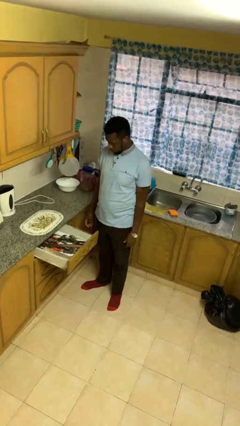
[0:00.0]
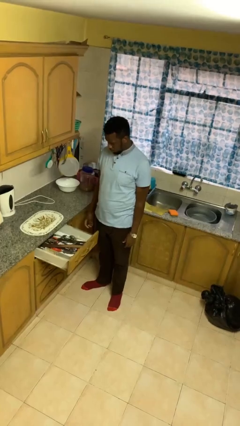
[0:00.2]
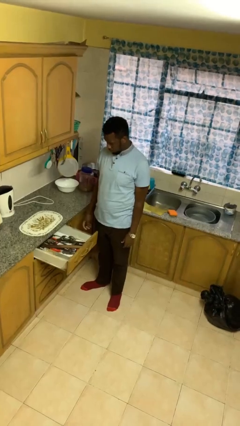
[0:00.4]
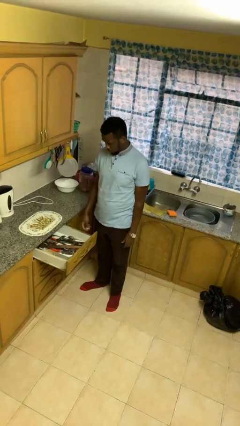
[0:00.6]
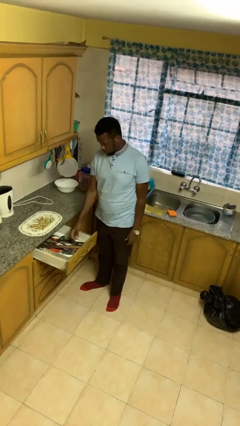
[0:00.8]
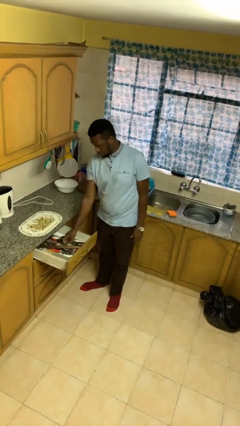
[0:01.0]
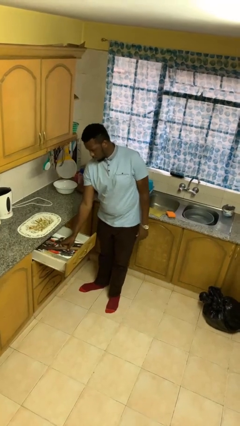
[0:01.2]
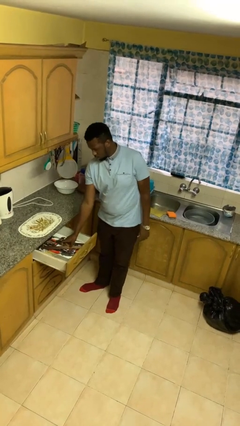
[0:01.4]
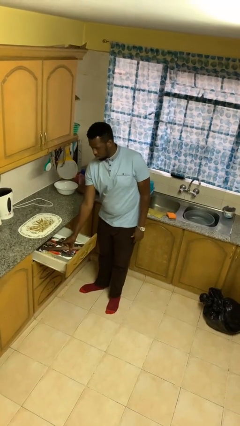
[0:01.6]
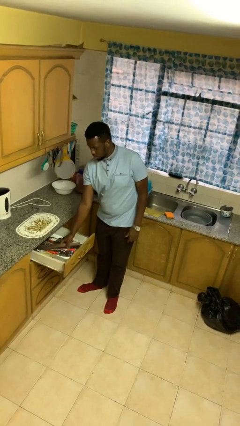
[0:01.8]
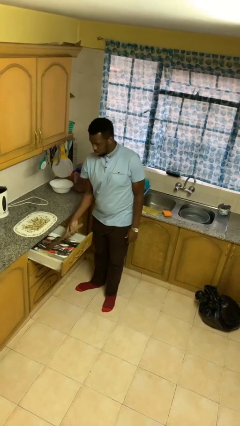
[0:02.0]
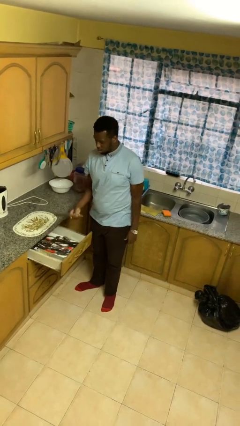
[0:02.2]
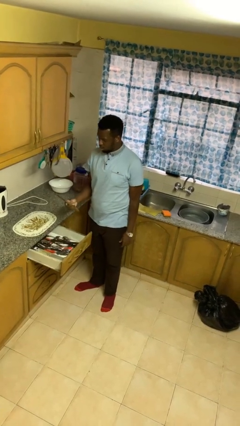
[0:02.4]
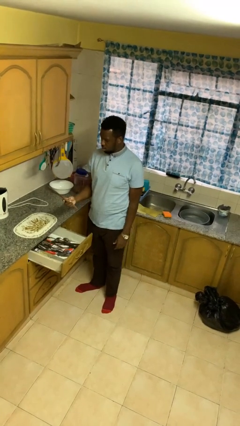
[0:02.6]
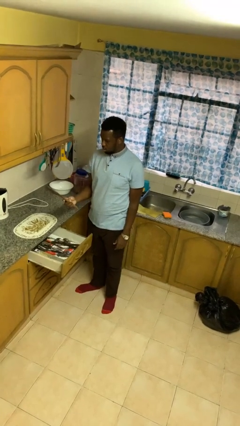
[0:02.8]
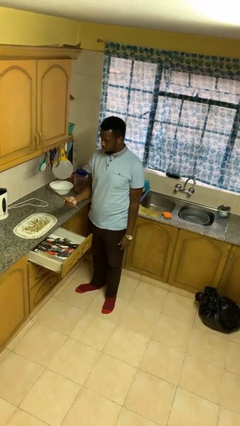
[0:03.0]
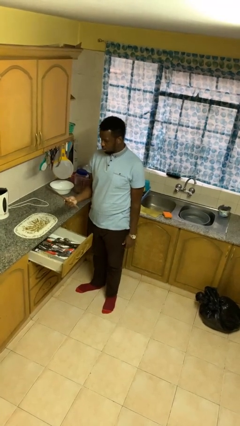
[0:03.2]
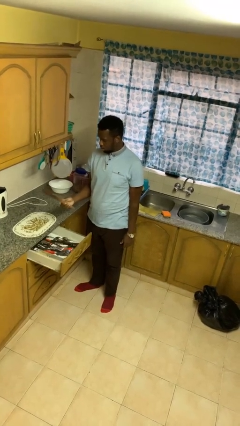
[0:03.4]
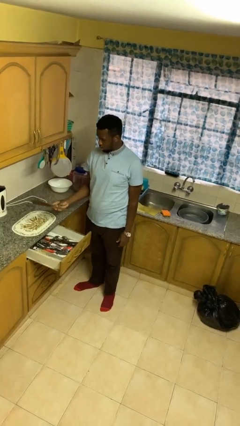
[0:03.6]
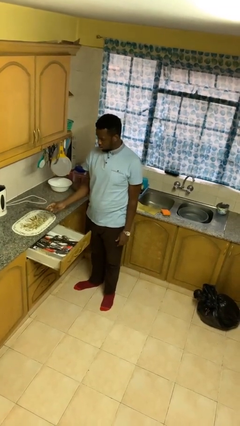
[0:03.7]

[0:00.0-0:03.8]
person takes object from kitchen drawer

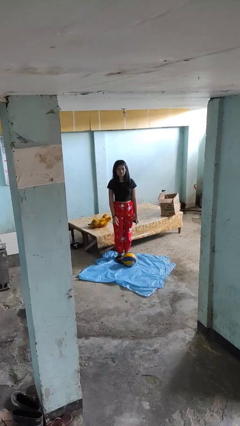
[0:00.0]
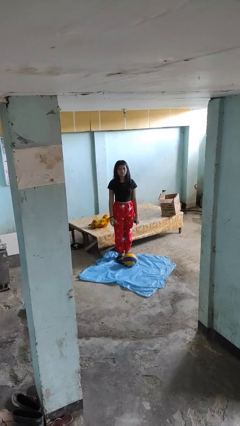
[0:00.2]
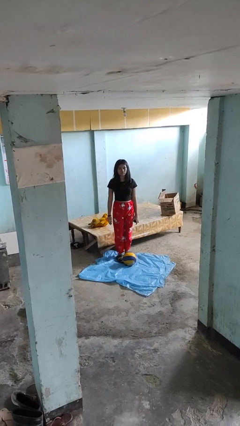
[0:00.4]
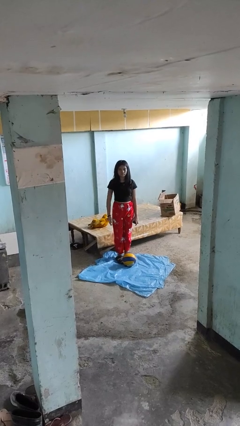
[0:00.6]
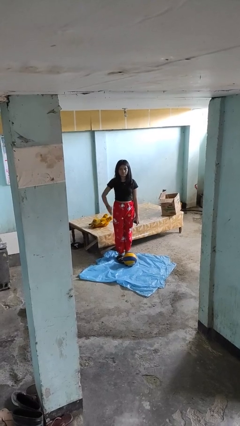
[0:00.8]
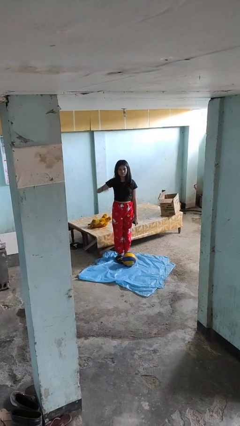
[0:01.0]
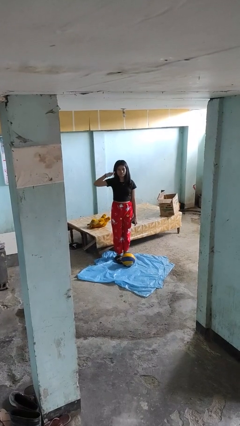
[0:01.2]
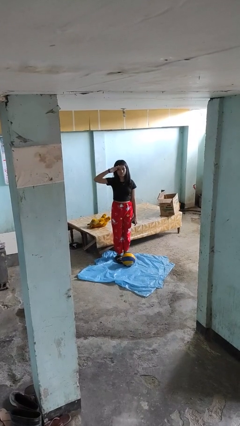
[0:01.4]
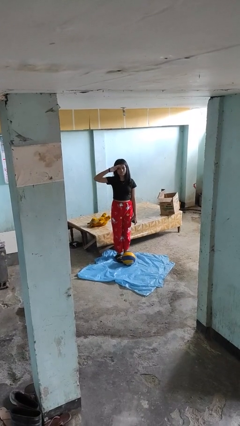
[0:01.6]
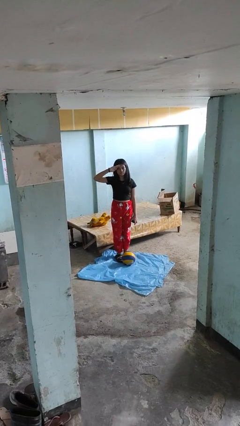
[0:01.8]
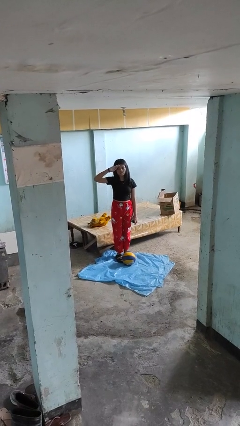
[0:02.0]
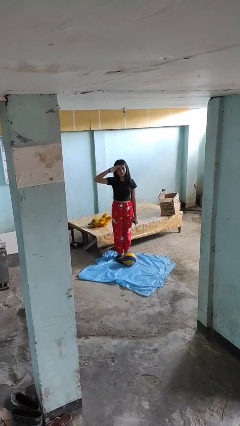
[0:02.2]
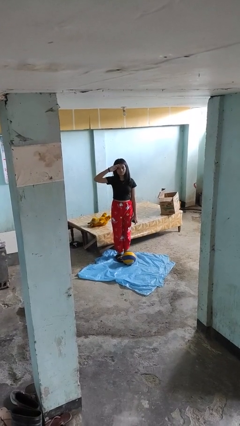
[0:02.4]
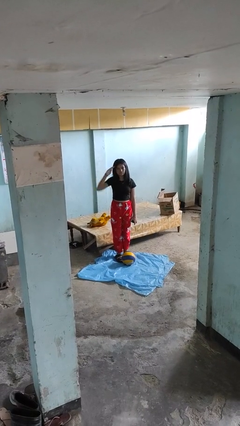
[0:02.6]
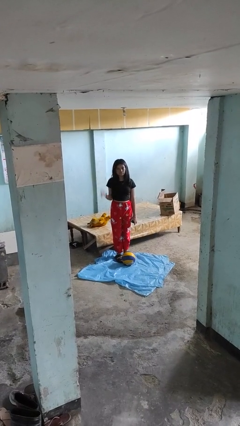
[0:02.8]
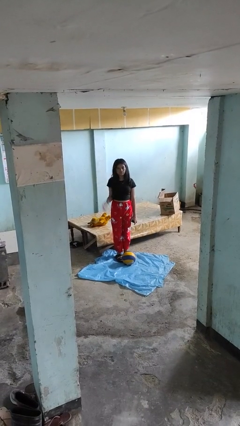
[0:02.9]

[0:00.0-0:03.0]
person salutes

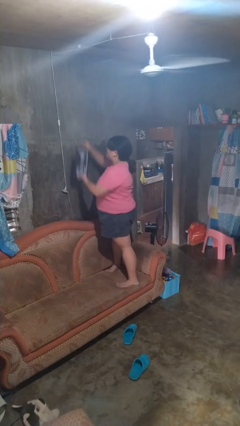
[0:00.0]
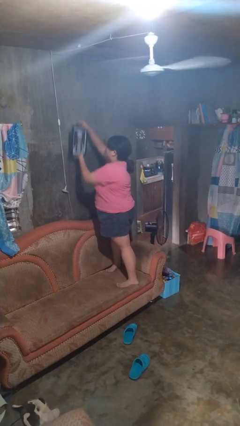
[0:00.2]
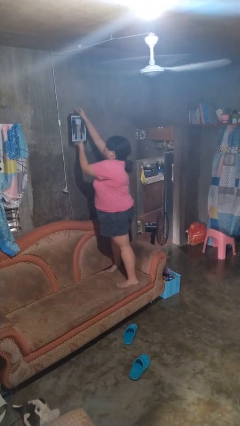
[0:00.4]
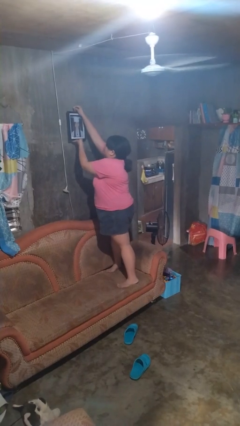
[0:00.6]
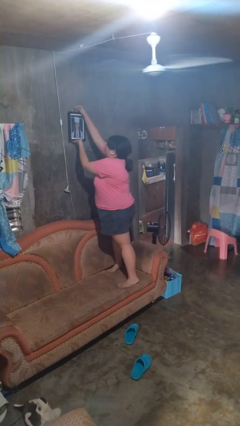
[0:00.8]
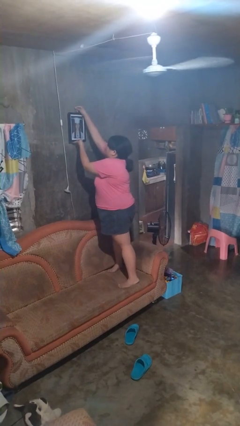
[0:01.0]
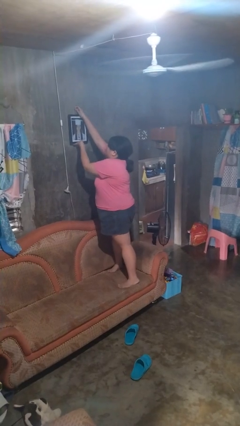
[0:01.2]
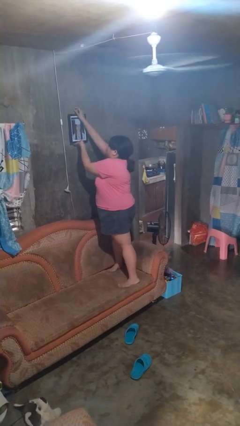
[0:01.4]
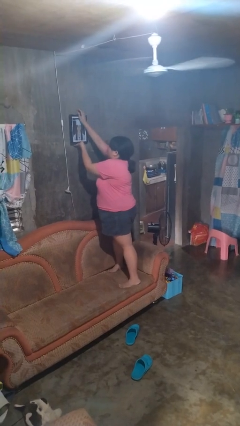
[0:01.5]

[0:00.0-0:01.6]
person puts up picture frame

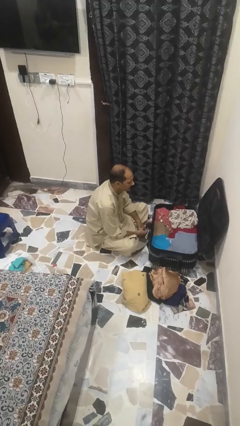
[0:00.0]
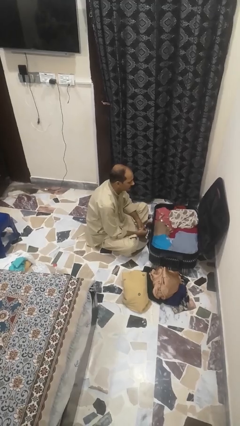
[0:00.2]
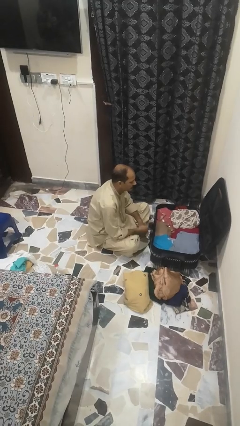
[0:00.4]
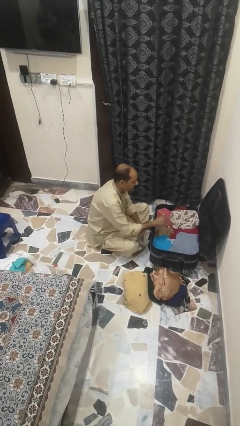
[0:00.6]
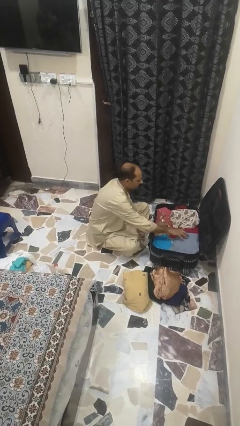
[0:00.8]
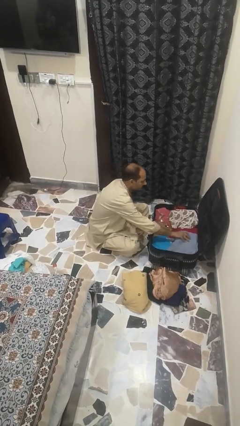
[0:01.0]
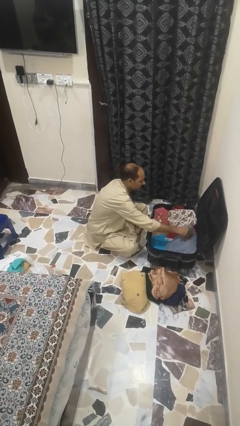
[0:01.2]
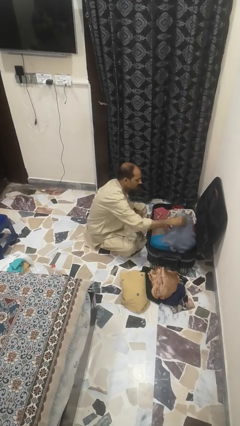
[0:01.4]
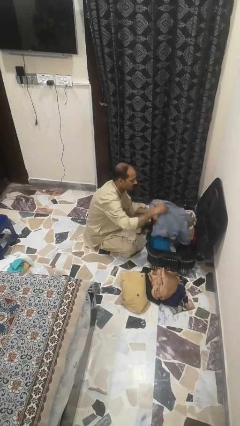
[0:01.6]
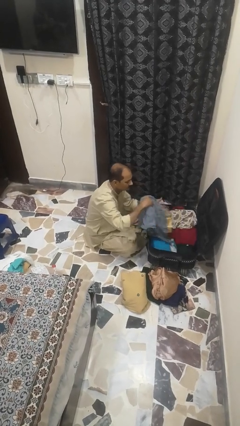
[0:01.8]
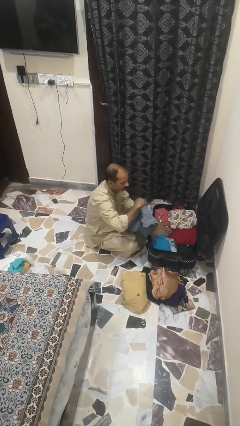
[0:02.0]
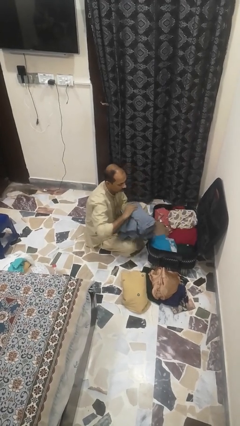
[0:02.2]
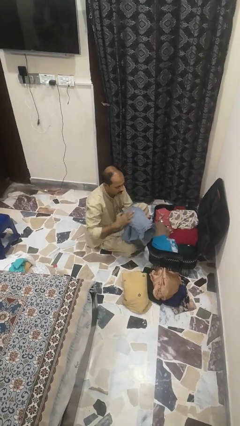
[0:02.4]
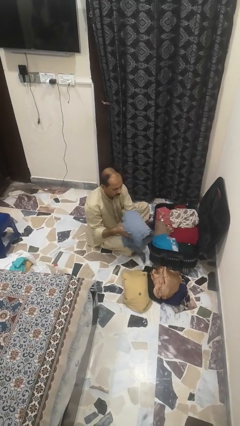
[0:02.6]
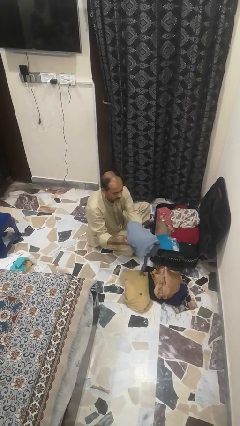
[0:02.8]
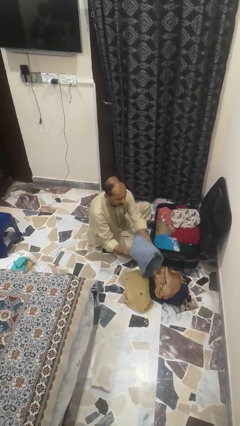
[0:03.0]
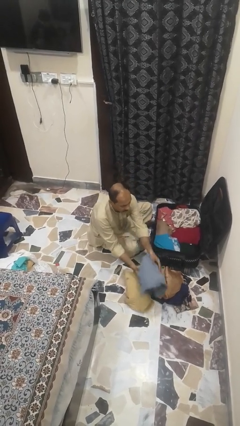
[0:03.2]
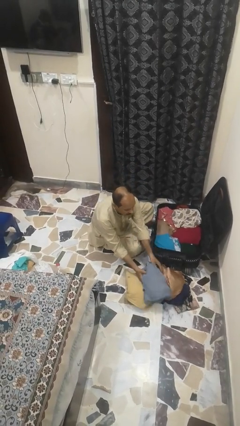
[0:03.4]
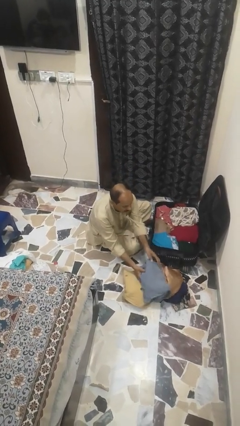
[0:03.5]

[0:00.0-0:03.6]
person unloads clothes from suitcase

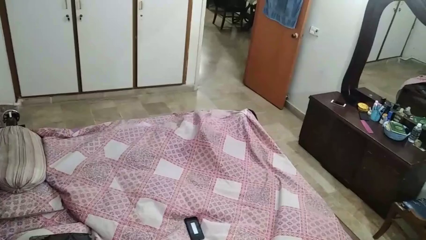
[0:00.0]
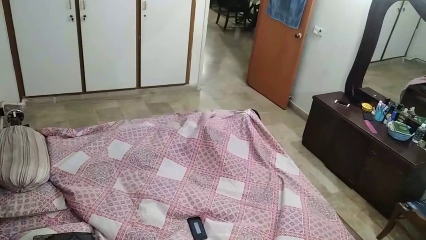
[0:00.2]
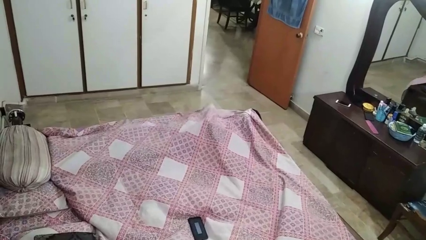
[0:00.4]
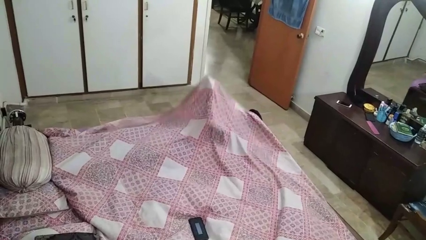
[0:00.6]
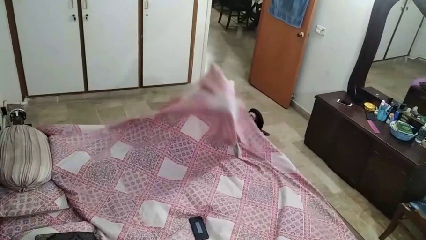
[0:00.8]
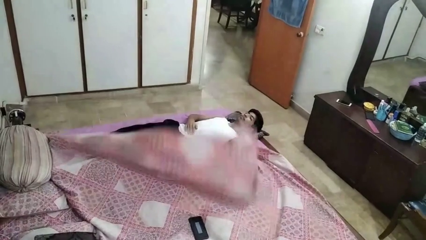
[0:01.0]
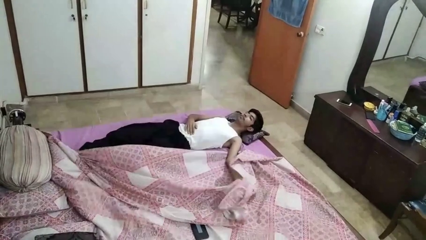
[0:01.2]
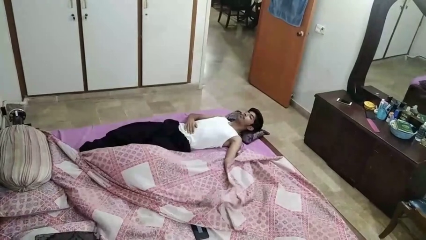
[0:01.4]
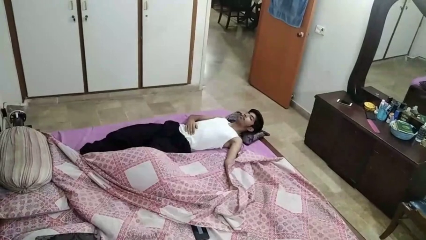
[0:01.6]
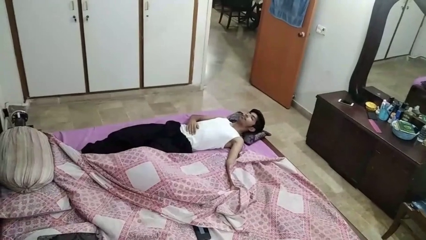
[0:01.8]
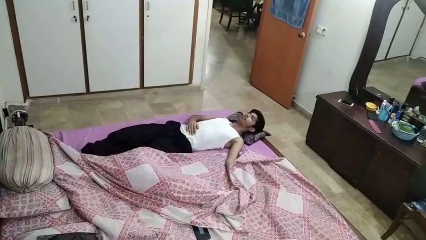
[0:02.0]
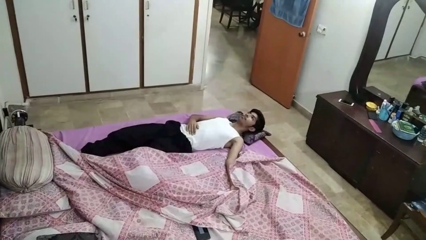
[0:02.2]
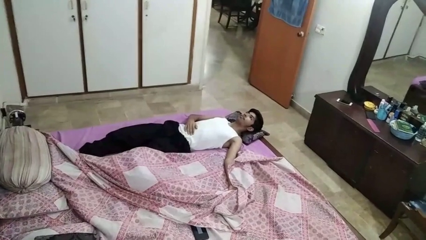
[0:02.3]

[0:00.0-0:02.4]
person uncovers with bedsheets

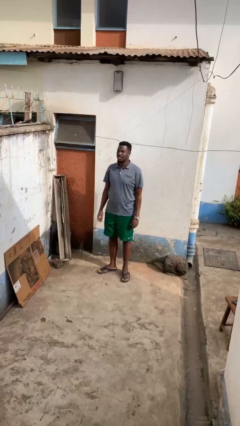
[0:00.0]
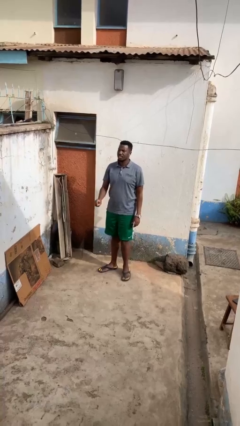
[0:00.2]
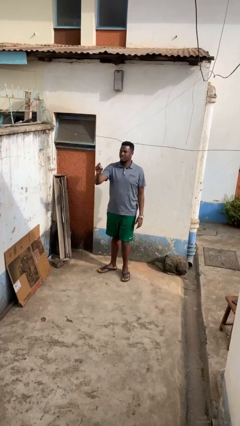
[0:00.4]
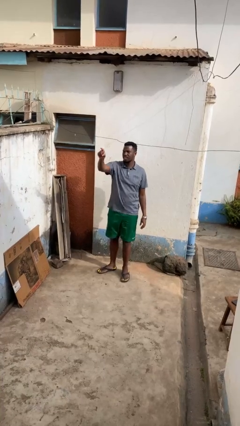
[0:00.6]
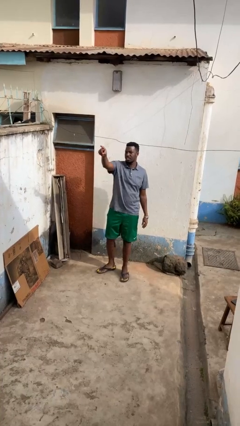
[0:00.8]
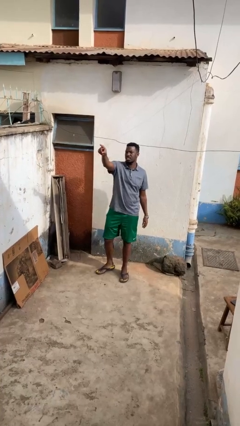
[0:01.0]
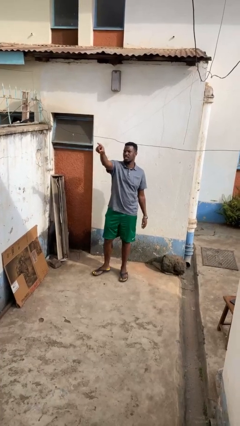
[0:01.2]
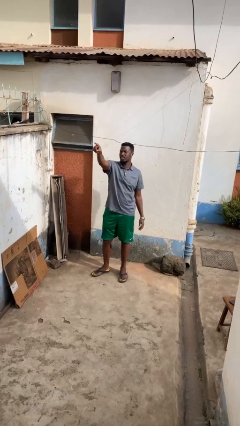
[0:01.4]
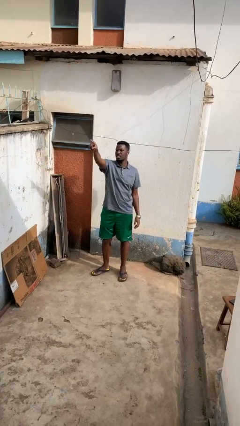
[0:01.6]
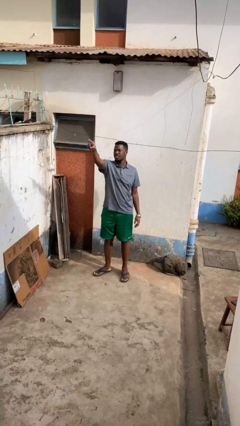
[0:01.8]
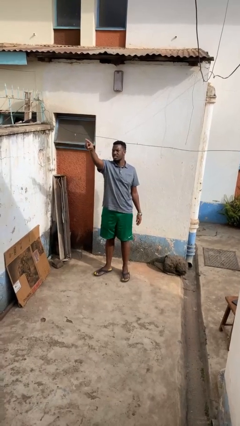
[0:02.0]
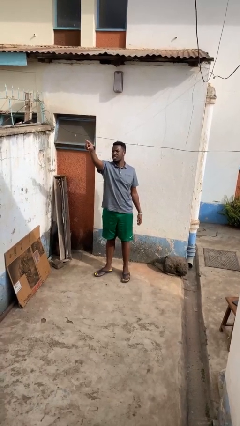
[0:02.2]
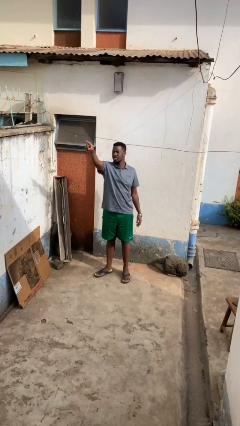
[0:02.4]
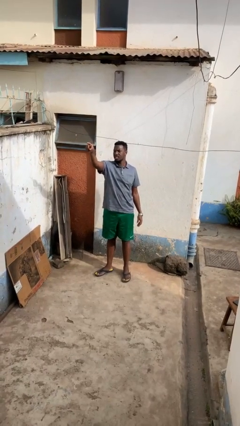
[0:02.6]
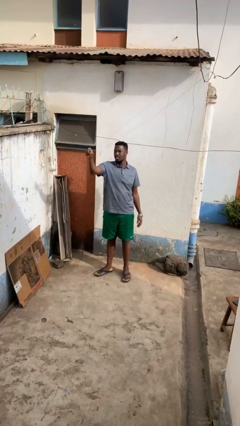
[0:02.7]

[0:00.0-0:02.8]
person points at person

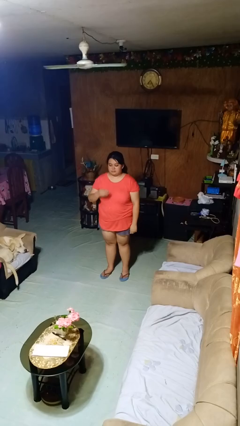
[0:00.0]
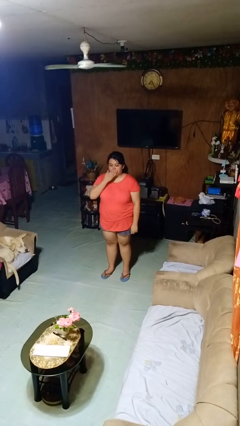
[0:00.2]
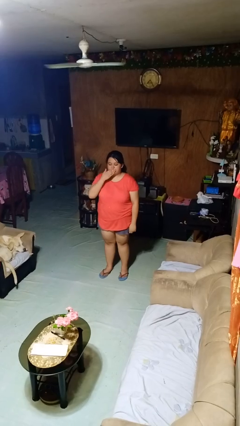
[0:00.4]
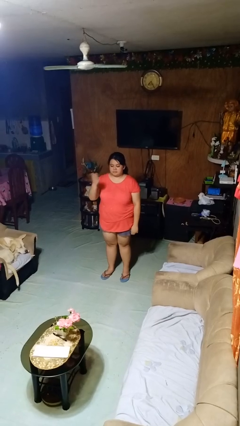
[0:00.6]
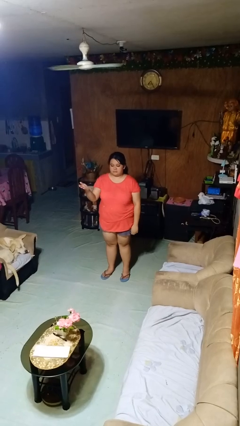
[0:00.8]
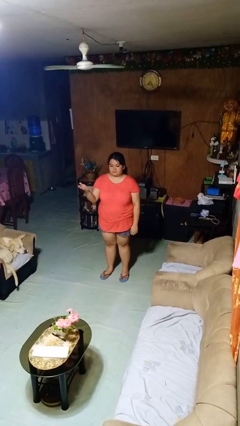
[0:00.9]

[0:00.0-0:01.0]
person gestures blow kiss
